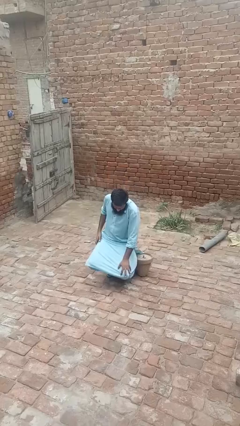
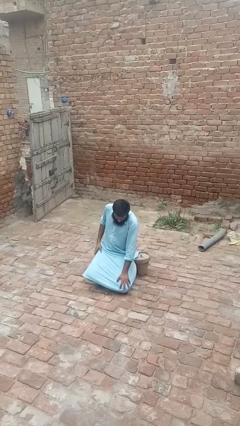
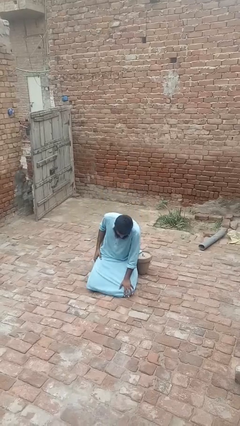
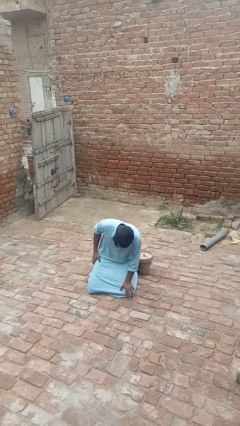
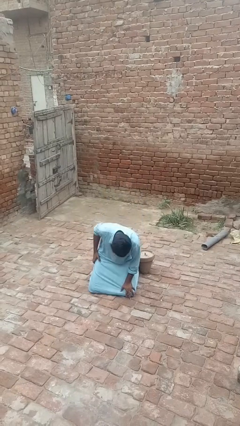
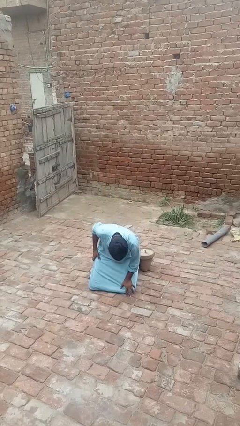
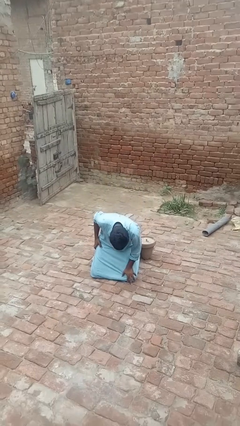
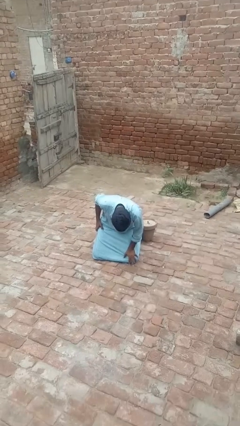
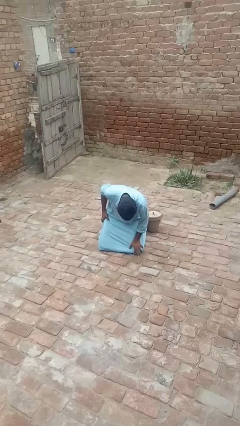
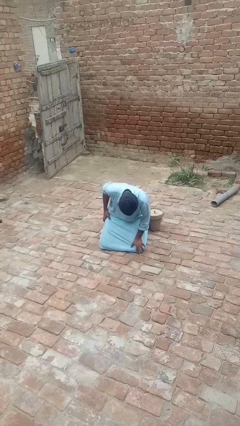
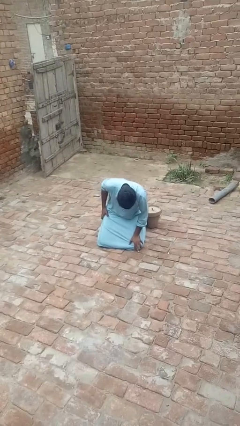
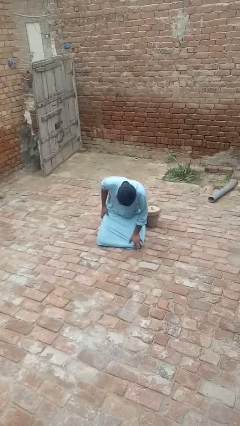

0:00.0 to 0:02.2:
person lies down on floor

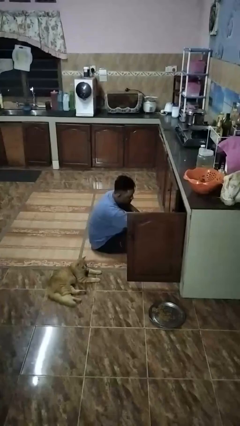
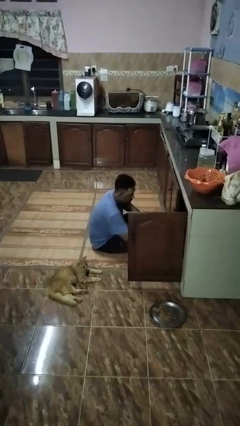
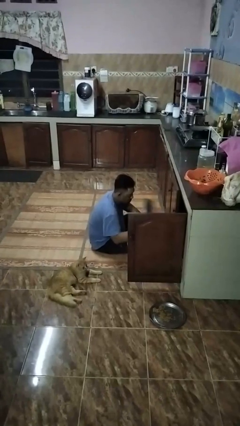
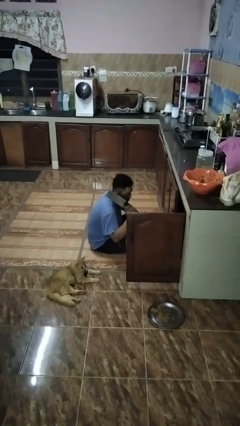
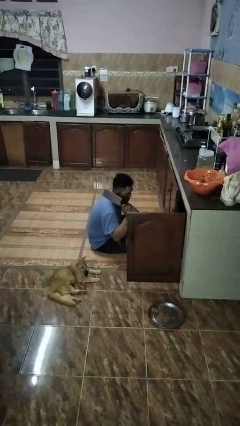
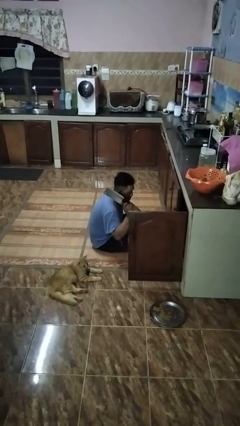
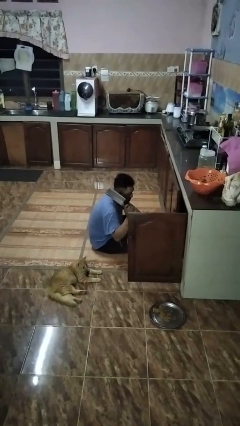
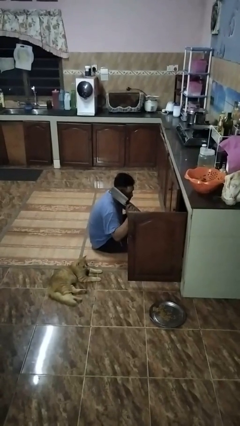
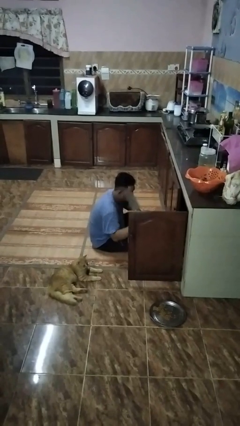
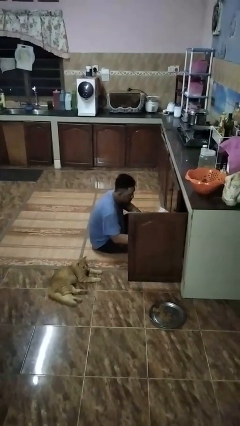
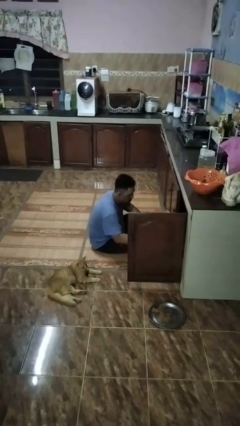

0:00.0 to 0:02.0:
person takes object from kitchen drawer

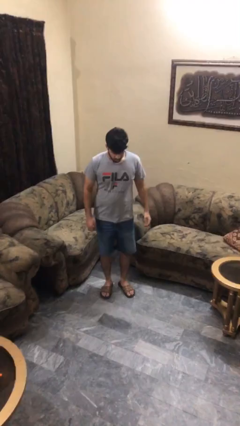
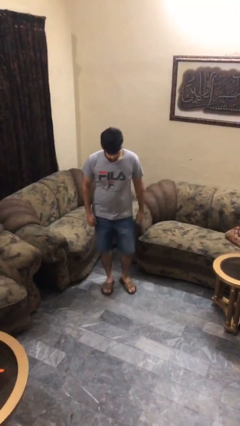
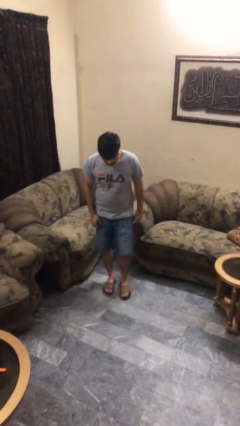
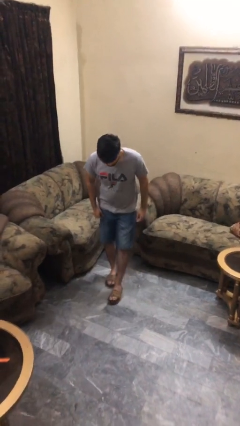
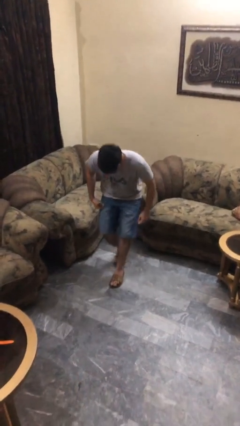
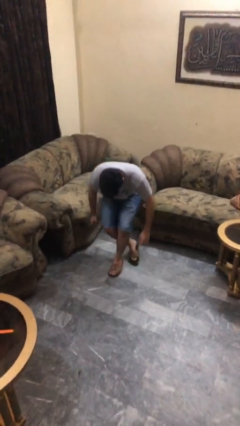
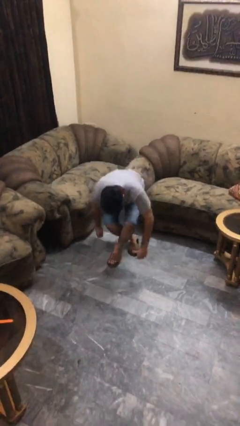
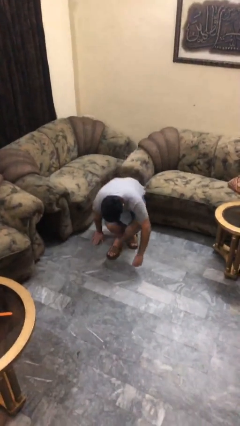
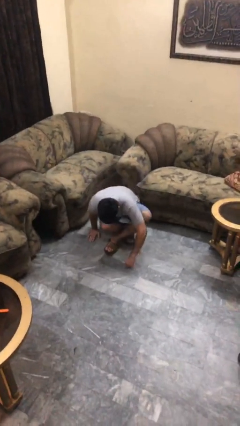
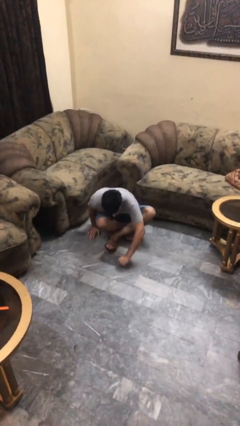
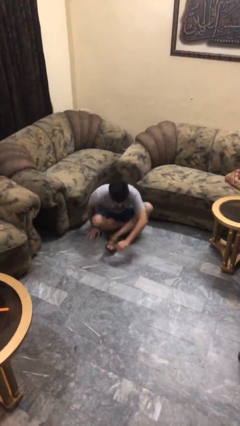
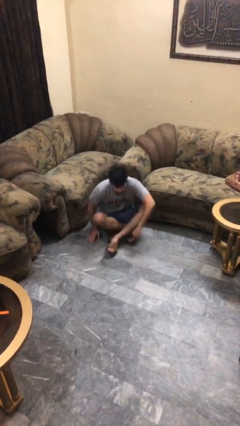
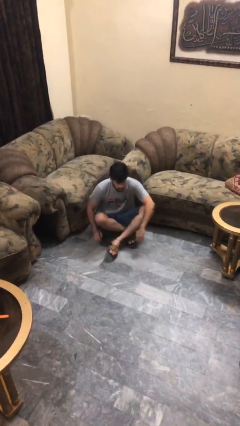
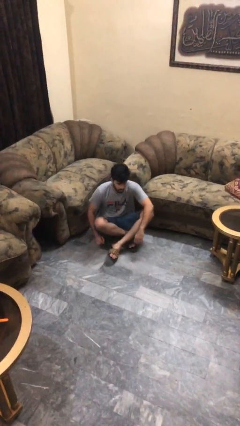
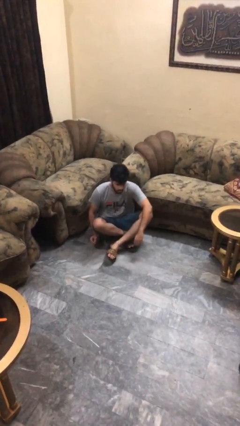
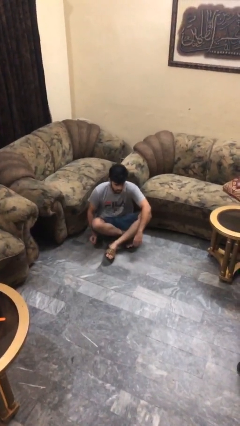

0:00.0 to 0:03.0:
person sits crisscross

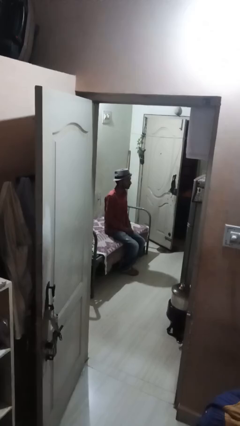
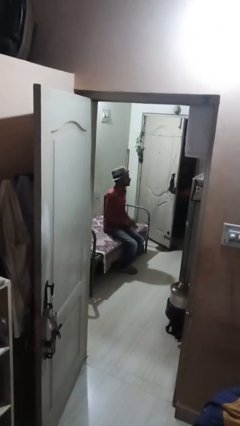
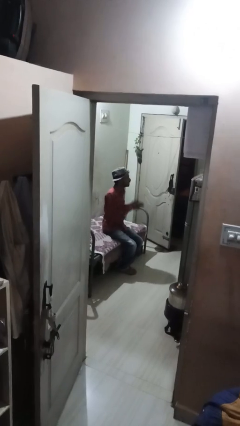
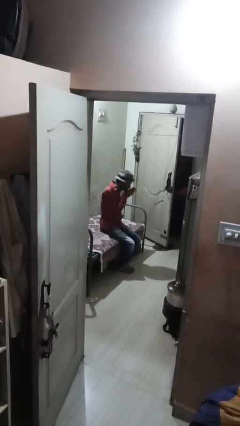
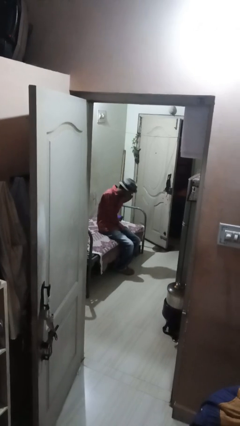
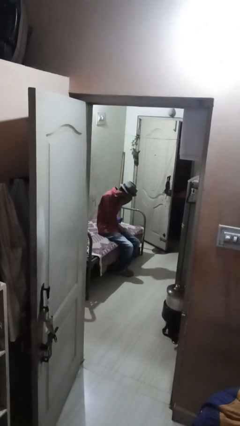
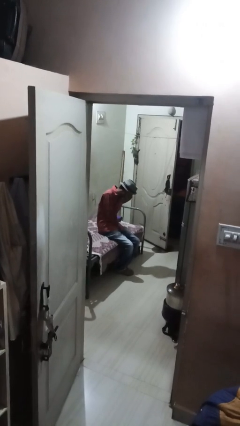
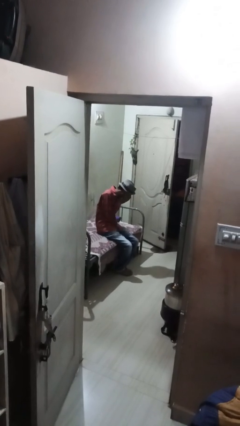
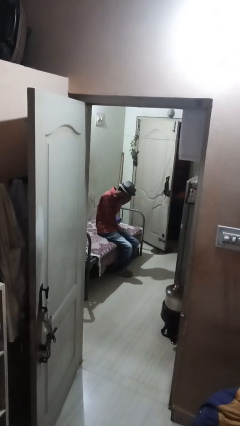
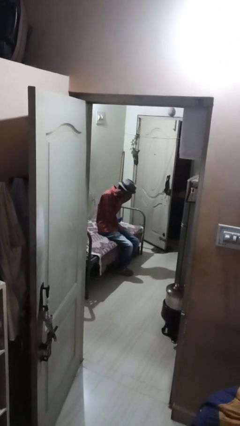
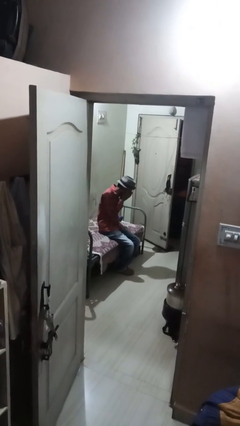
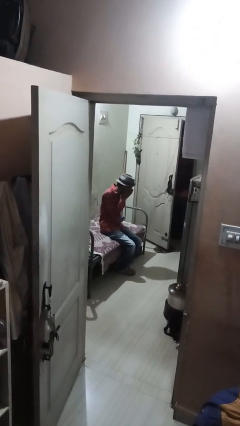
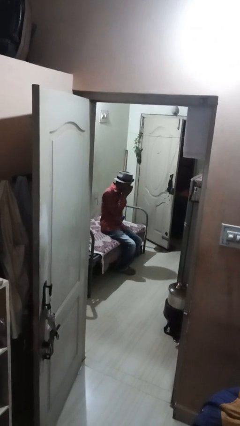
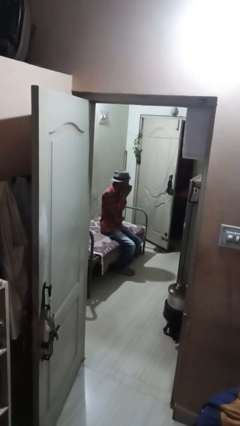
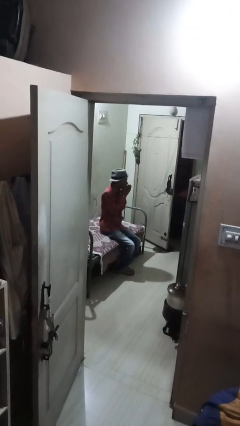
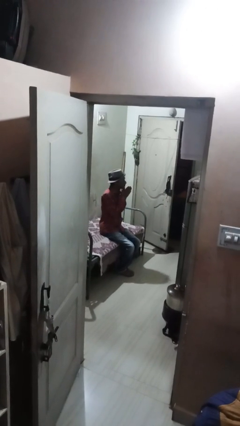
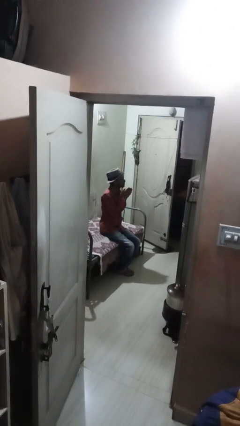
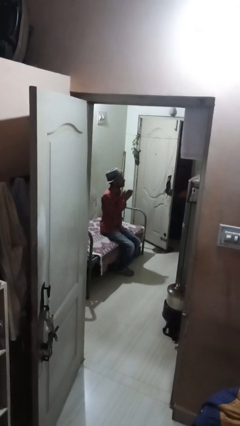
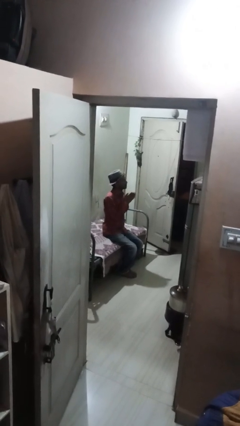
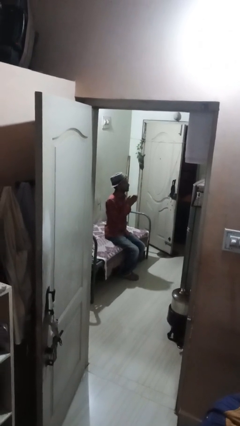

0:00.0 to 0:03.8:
person sneezes into hand

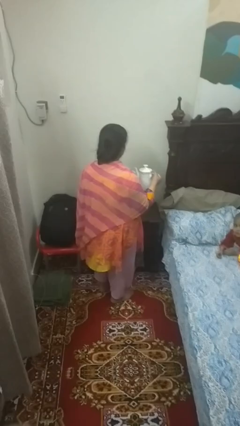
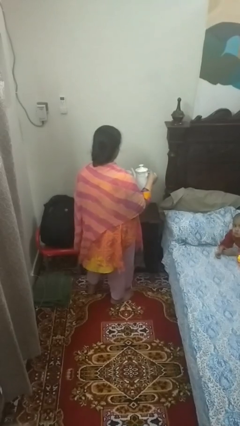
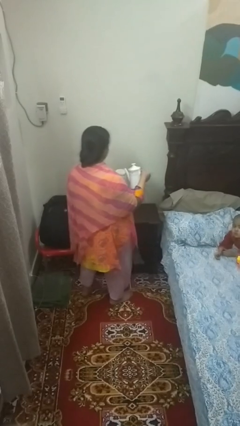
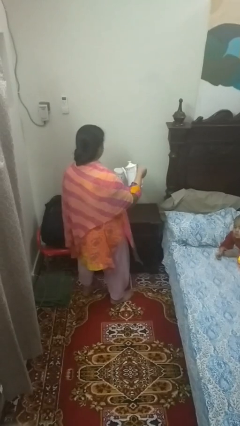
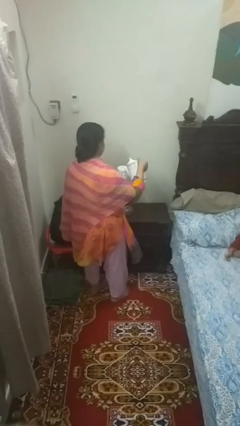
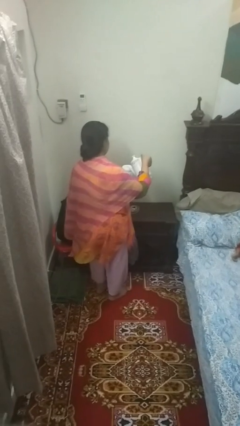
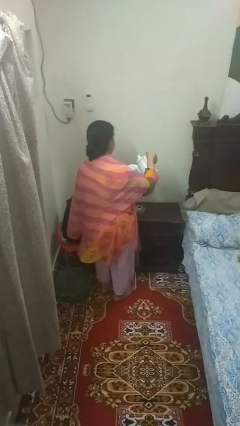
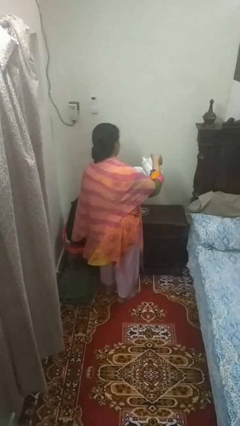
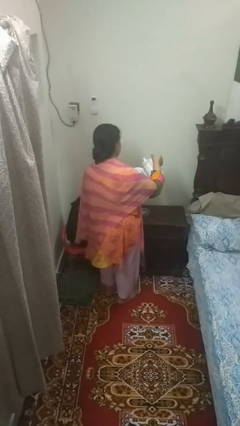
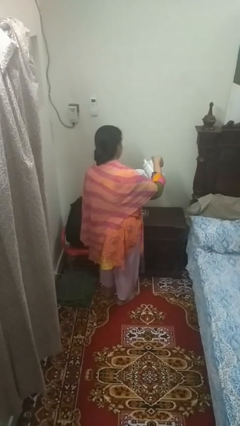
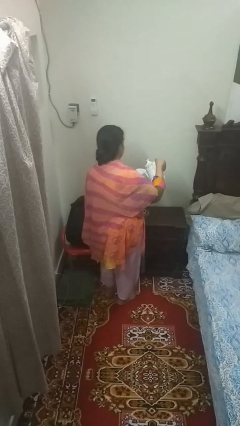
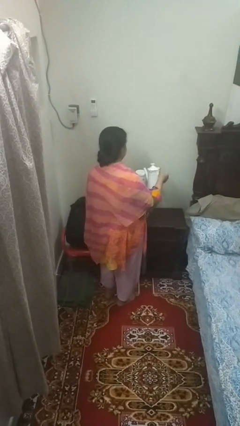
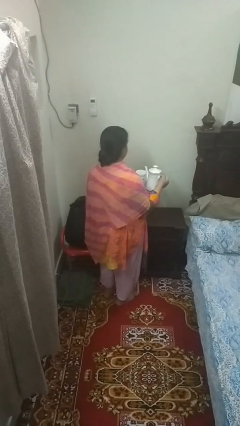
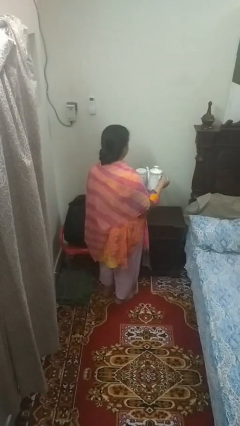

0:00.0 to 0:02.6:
person pours coffee into mug

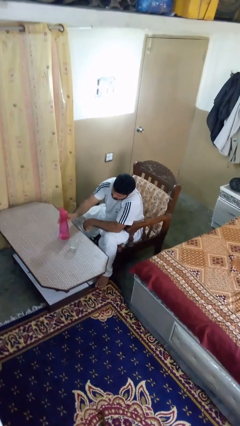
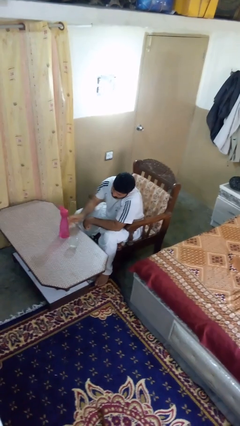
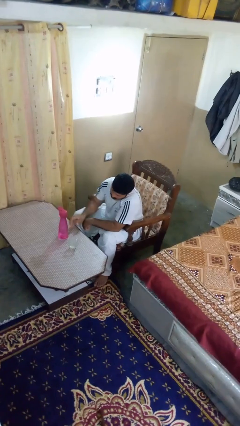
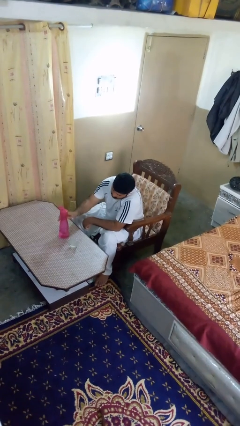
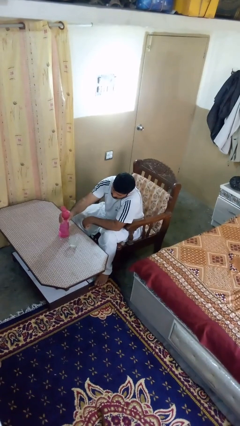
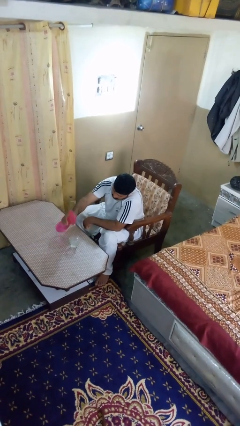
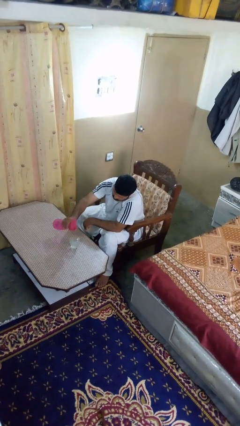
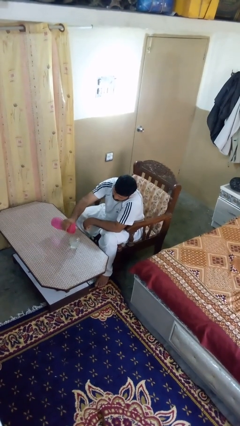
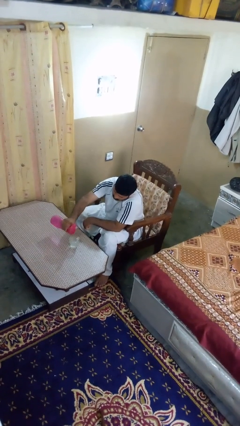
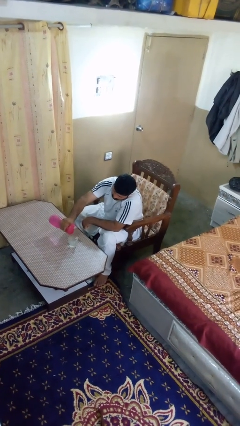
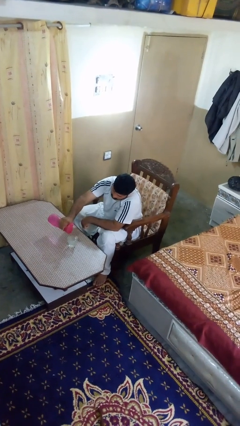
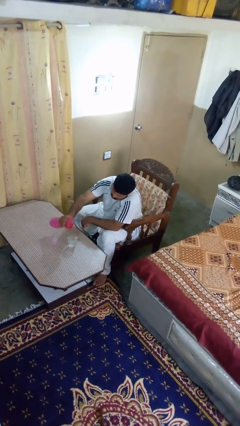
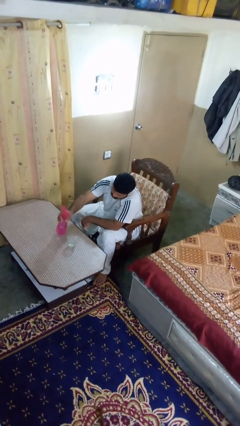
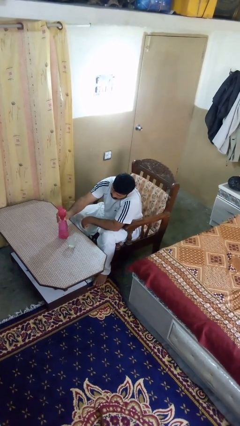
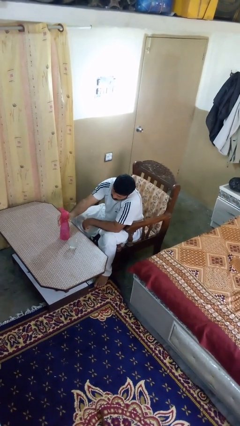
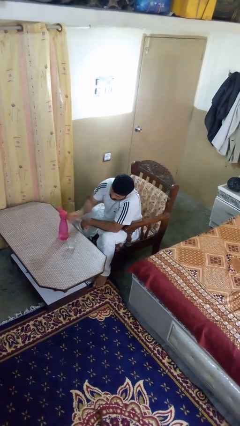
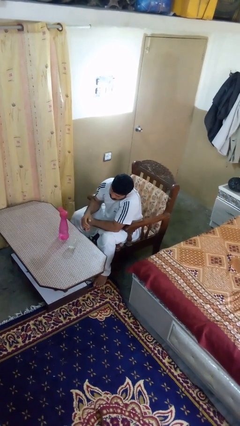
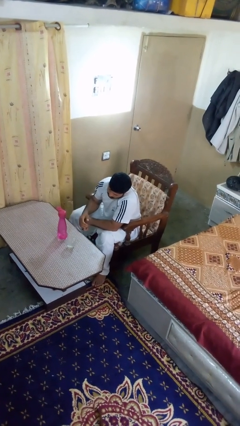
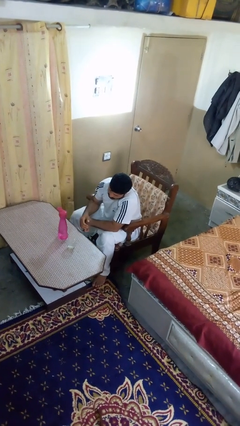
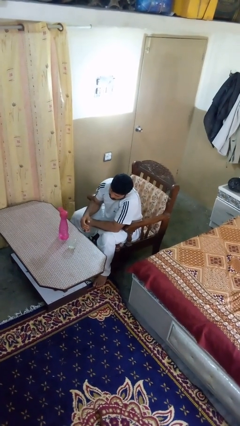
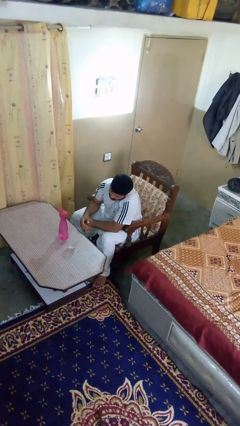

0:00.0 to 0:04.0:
person pours liquid into cup

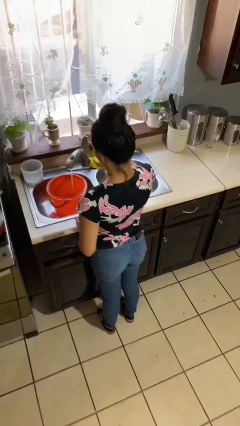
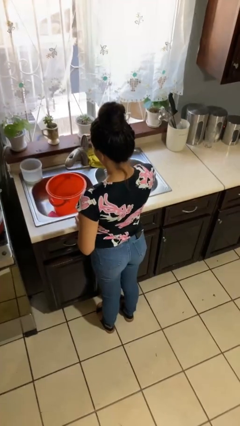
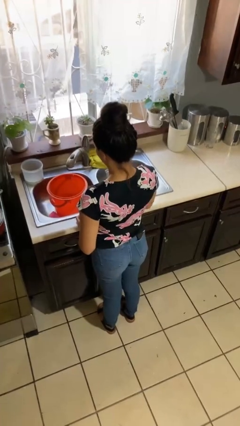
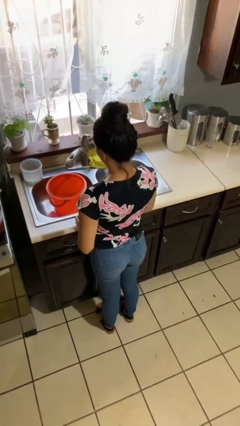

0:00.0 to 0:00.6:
person turns off faucet
